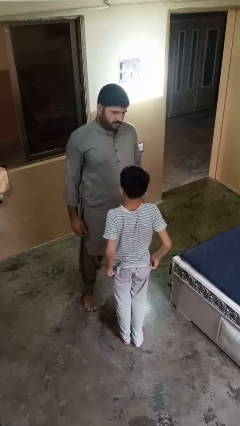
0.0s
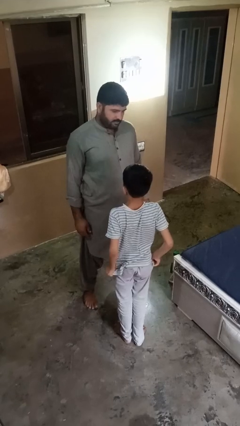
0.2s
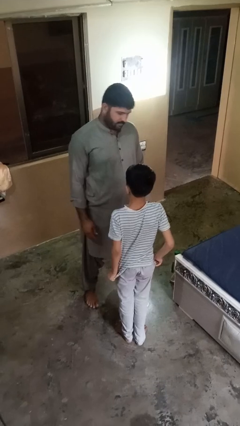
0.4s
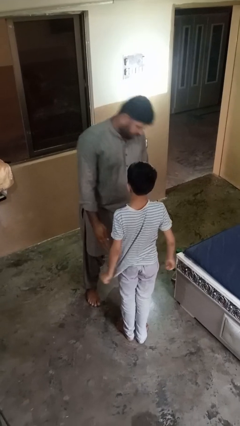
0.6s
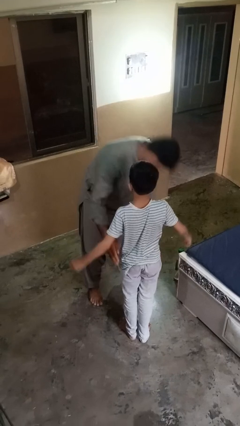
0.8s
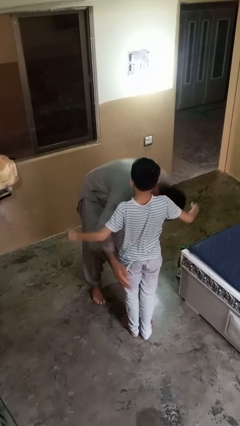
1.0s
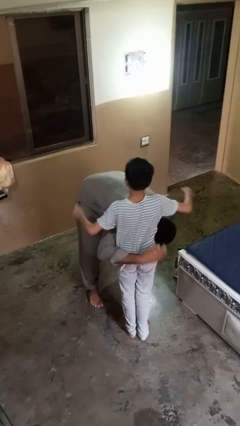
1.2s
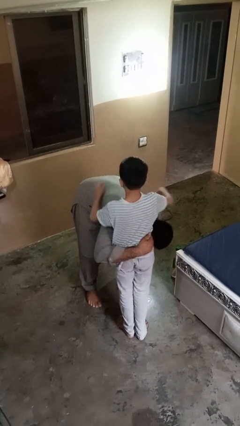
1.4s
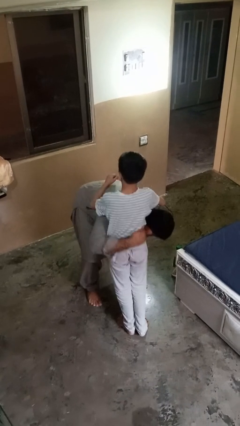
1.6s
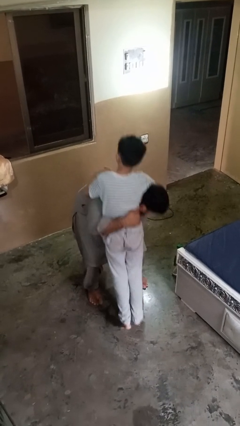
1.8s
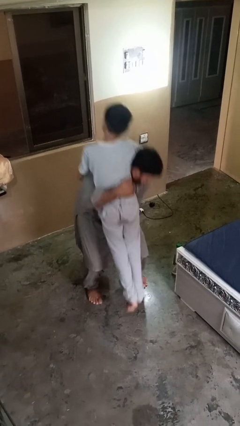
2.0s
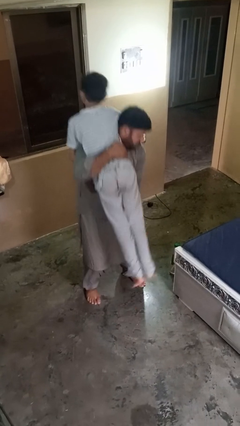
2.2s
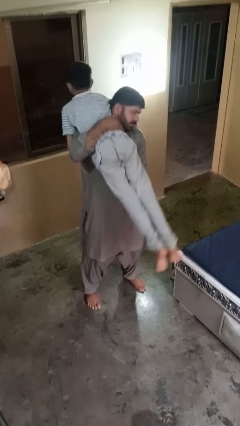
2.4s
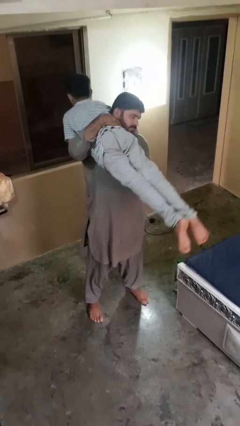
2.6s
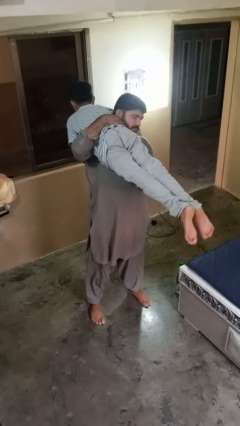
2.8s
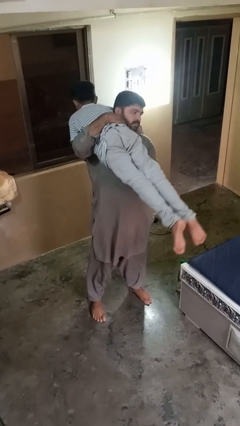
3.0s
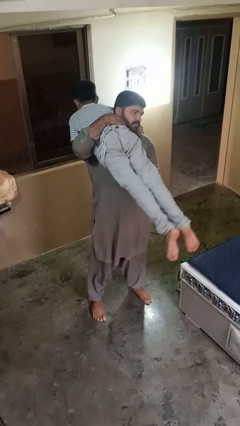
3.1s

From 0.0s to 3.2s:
person carries person on shoulders

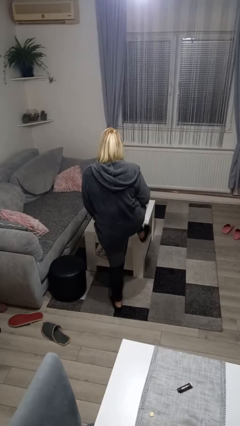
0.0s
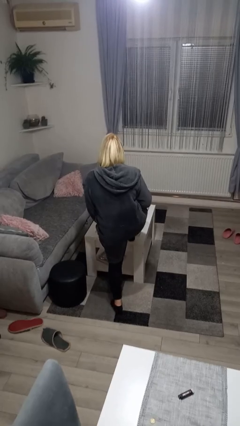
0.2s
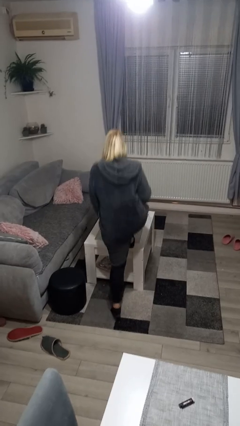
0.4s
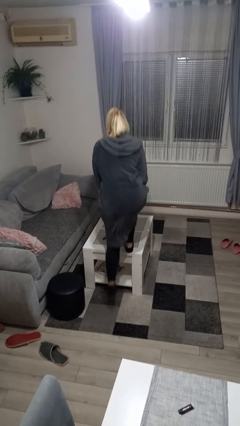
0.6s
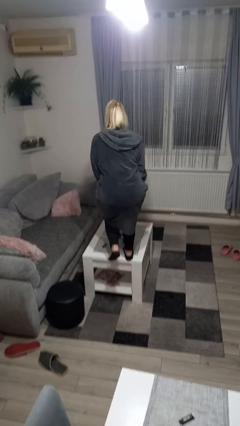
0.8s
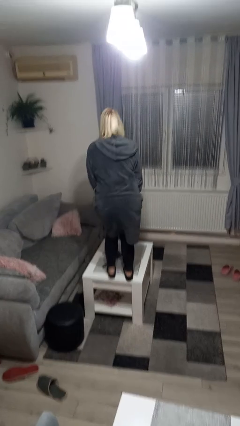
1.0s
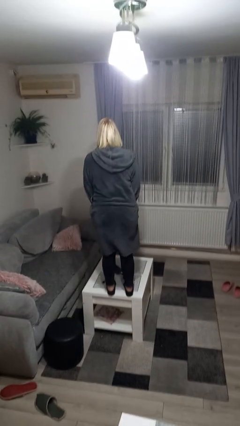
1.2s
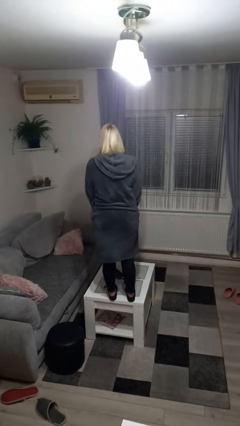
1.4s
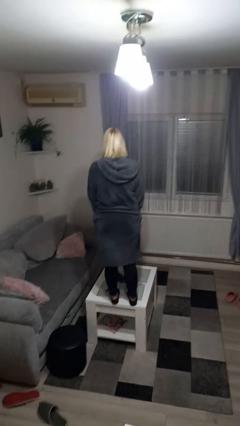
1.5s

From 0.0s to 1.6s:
person climbs on table

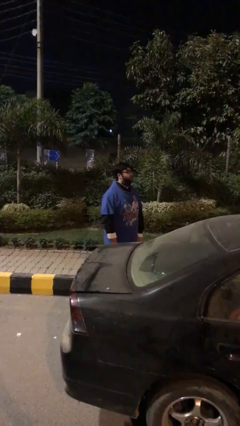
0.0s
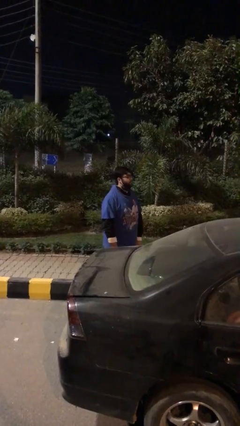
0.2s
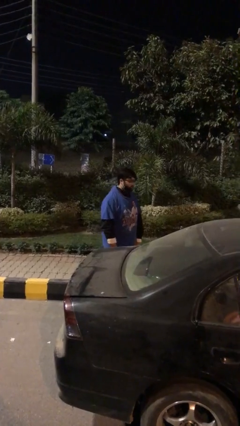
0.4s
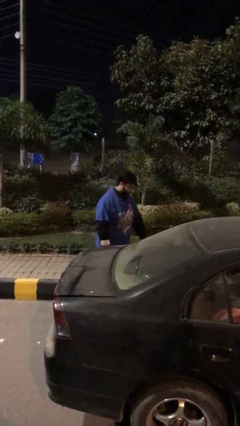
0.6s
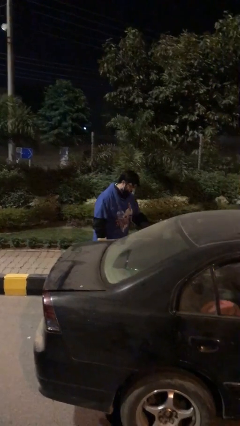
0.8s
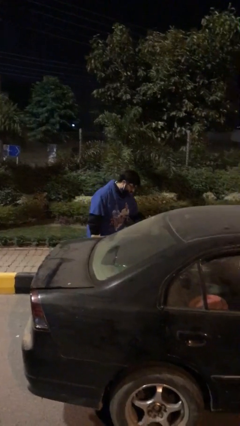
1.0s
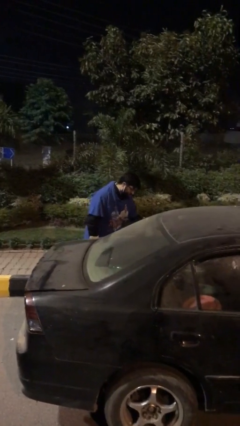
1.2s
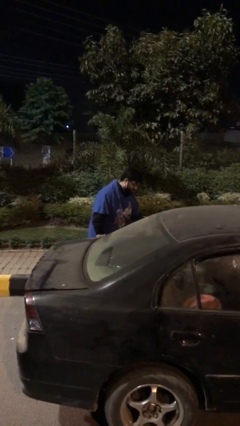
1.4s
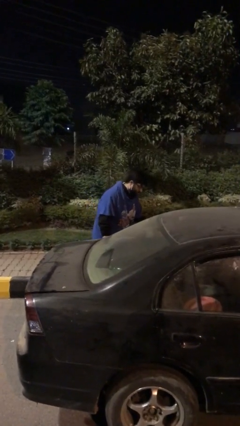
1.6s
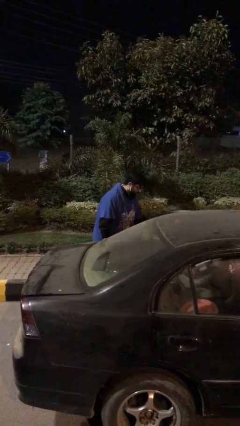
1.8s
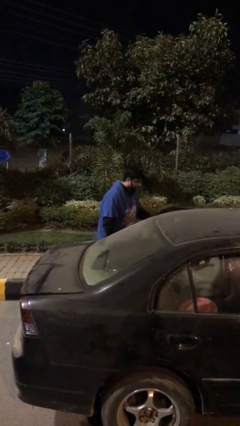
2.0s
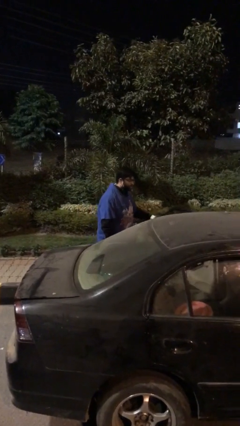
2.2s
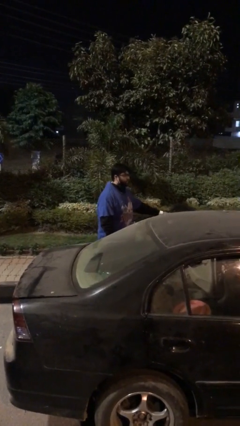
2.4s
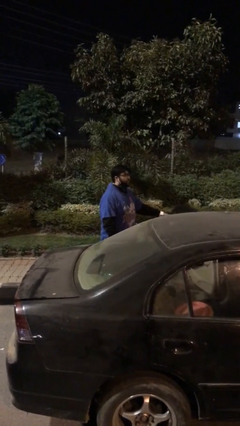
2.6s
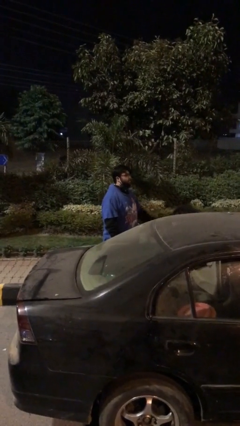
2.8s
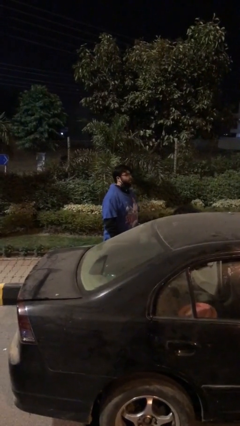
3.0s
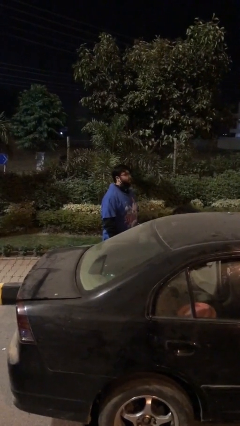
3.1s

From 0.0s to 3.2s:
person opens car door

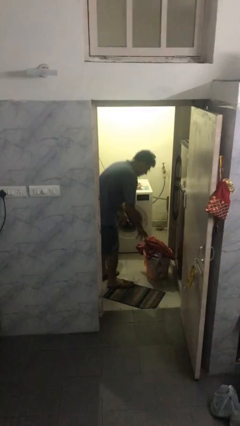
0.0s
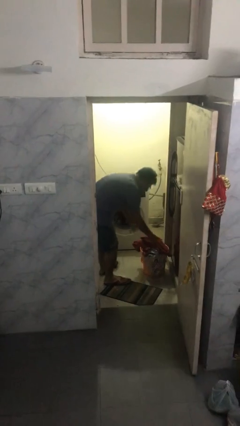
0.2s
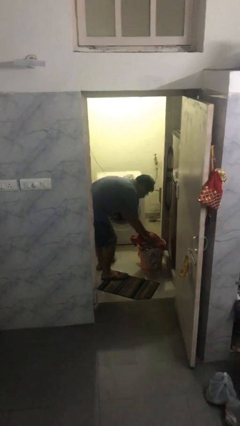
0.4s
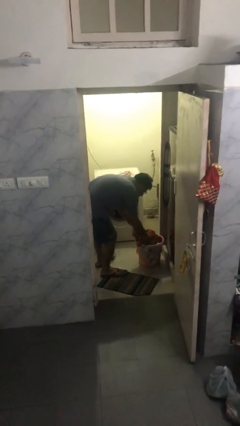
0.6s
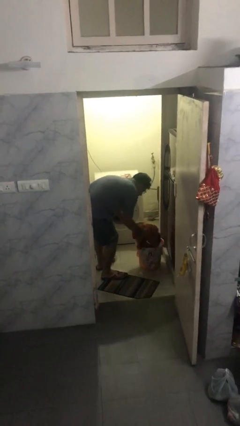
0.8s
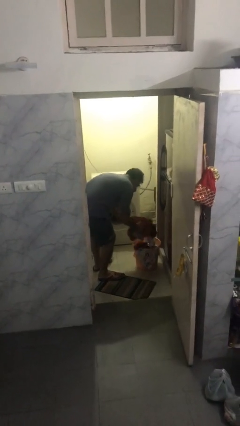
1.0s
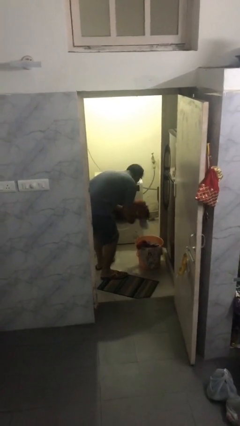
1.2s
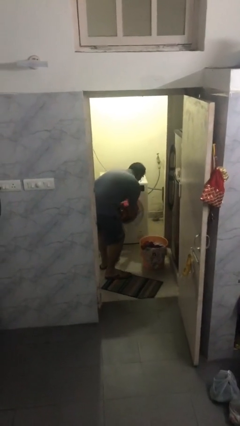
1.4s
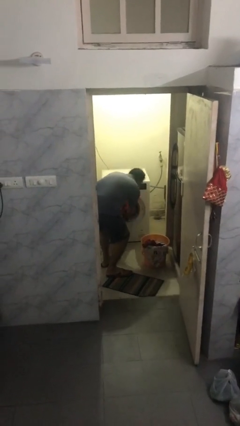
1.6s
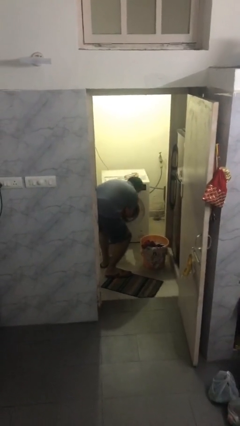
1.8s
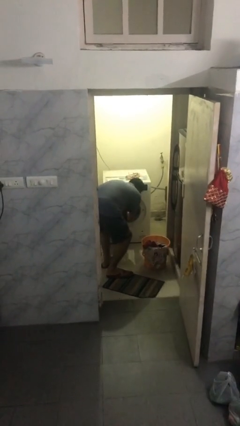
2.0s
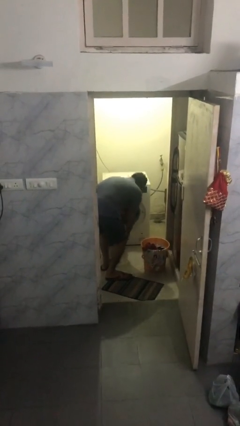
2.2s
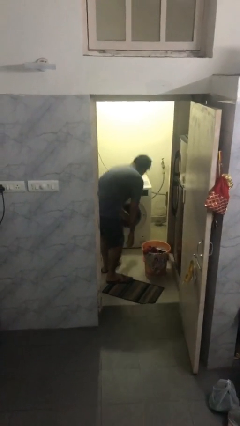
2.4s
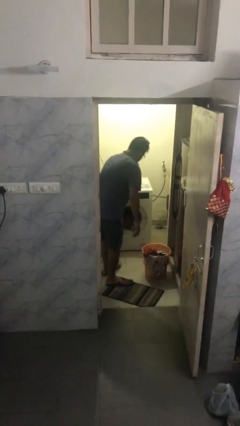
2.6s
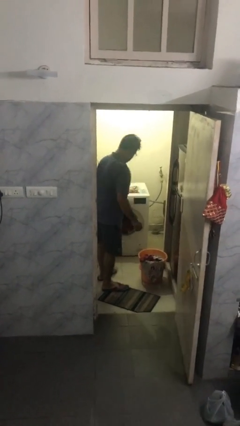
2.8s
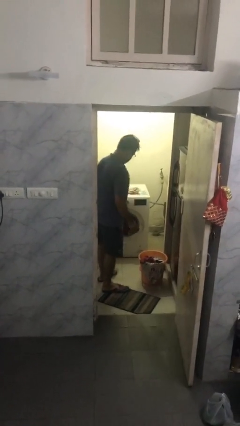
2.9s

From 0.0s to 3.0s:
person loads dryer

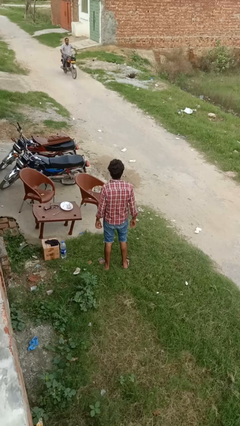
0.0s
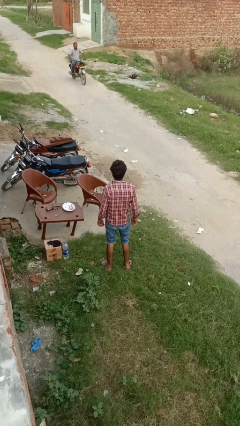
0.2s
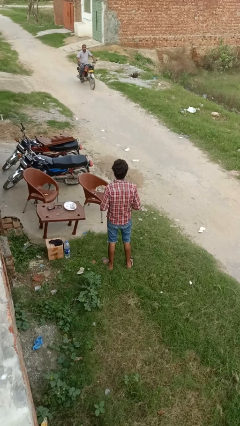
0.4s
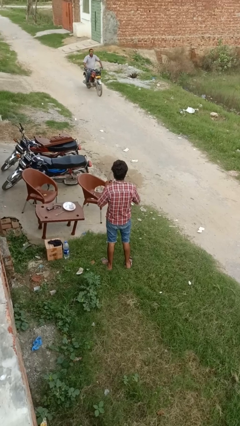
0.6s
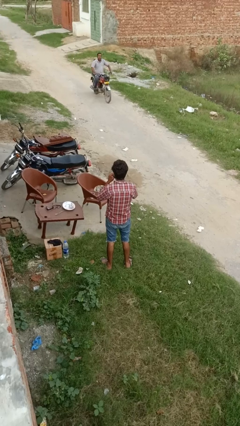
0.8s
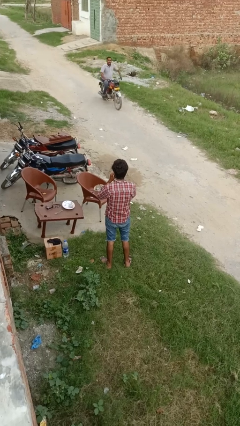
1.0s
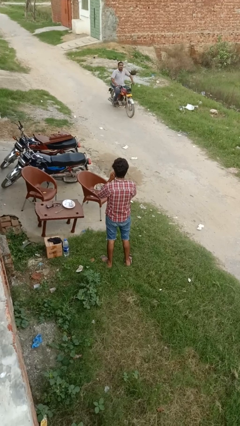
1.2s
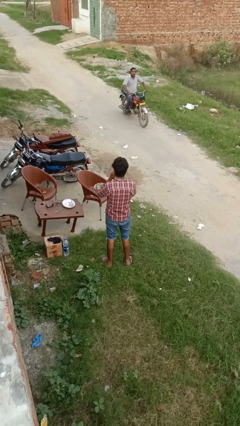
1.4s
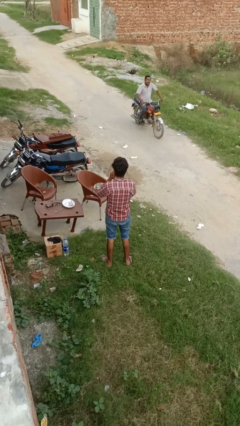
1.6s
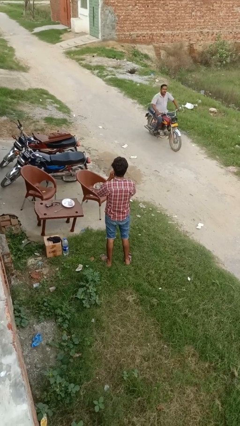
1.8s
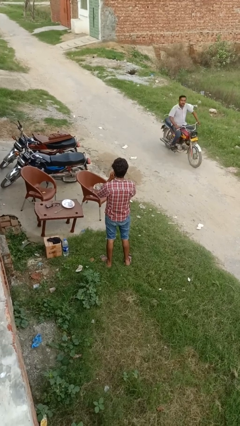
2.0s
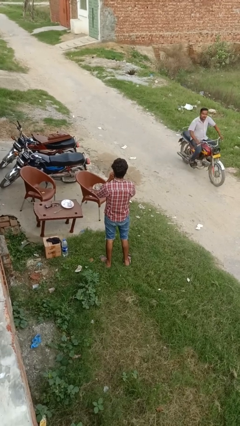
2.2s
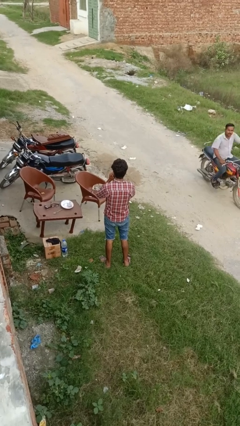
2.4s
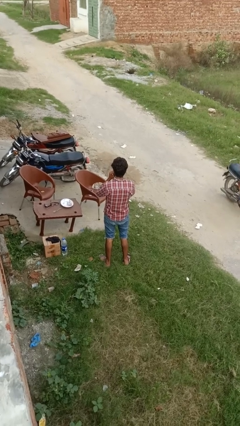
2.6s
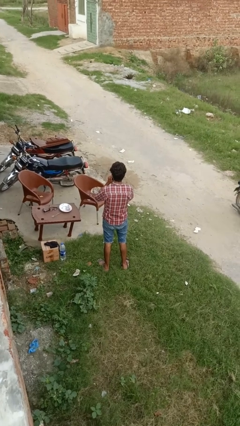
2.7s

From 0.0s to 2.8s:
person flosses

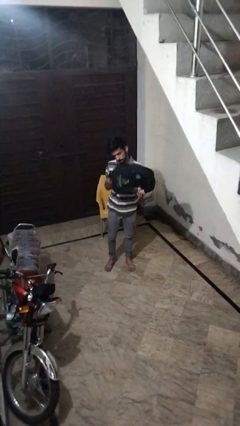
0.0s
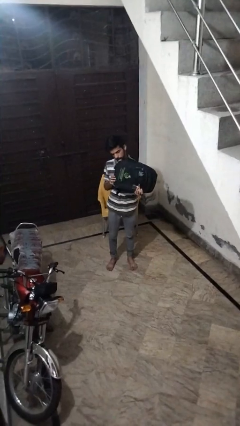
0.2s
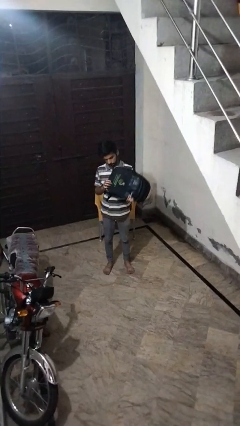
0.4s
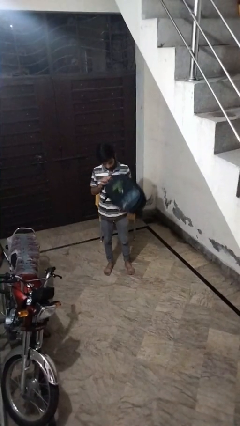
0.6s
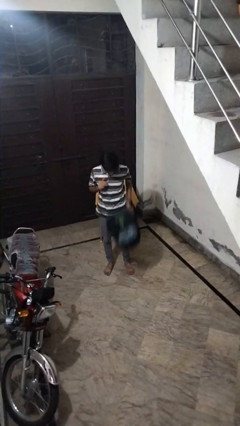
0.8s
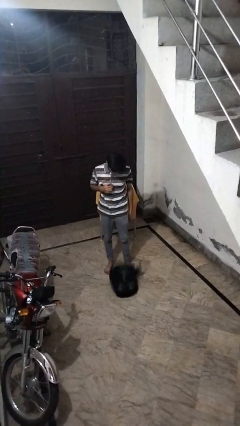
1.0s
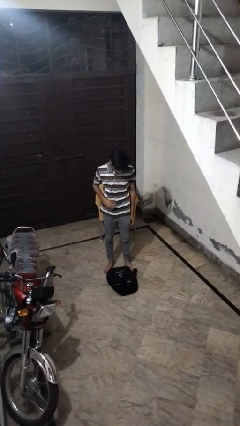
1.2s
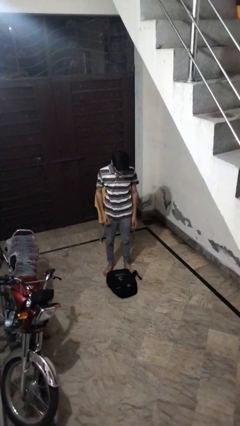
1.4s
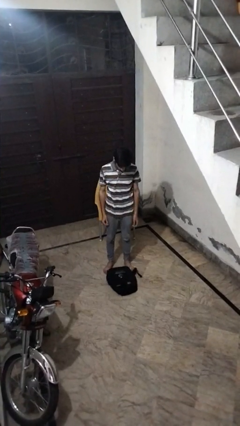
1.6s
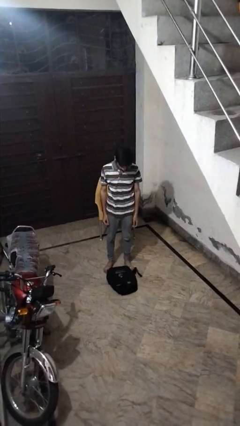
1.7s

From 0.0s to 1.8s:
person drops object

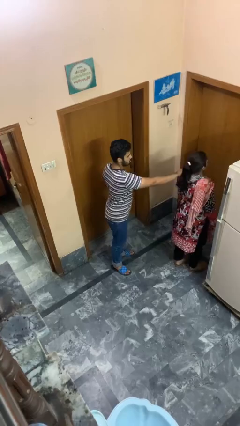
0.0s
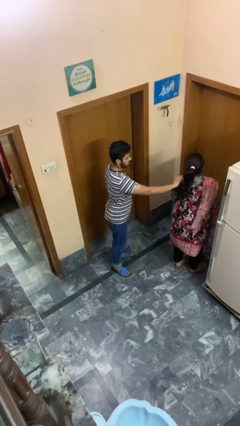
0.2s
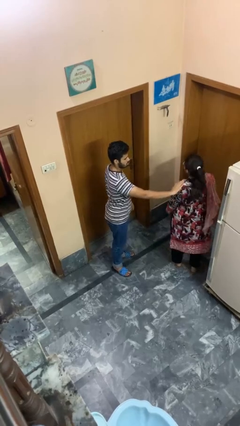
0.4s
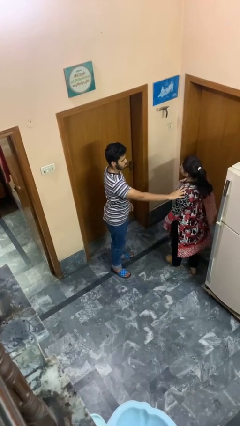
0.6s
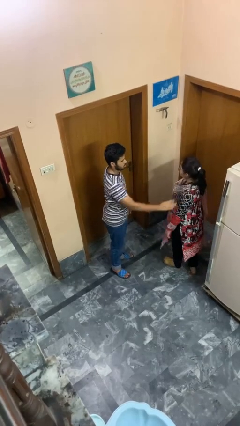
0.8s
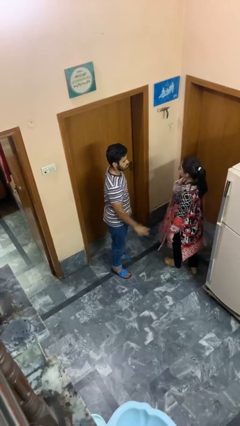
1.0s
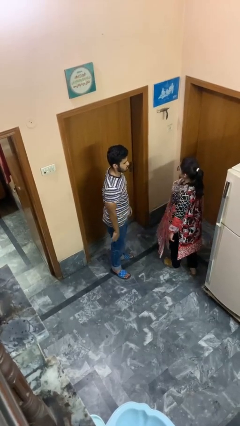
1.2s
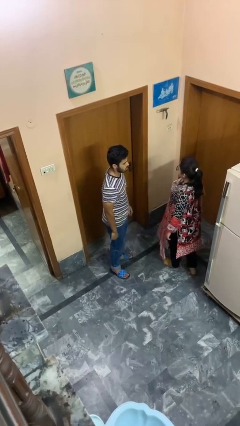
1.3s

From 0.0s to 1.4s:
person spins person around
